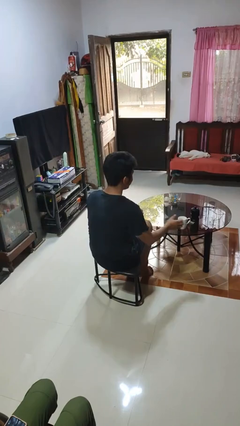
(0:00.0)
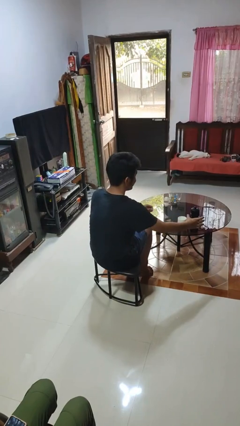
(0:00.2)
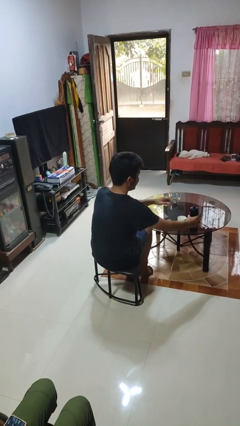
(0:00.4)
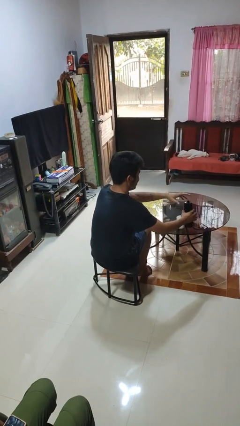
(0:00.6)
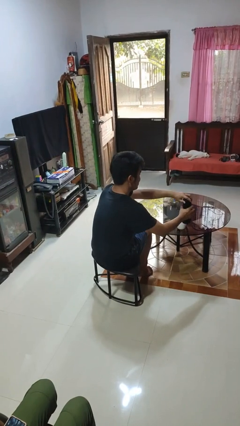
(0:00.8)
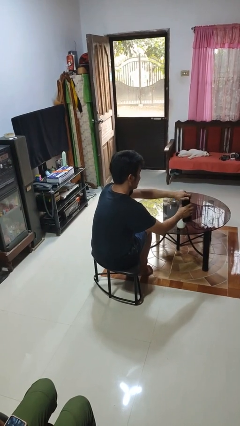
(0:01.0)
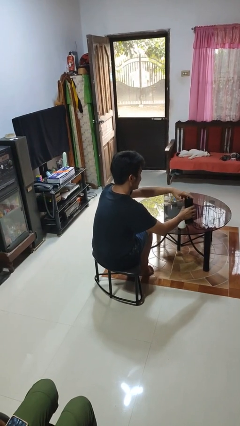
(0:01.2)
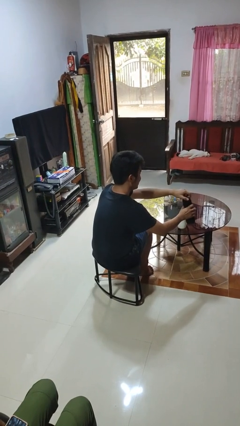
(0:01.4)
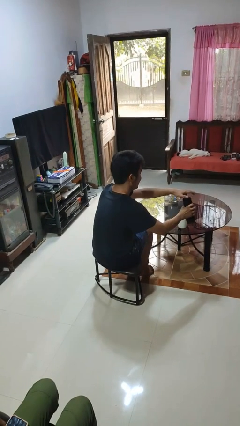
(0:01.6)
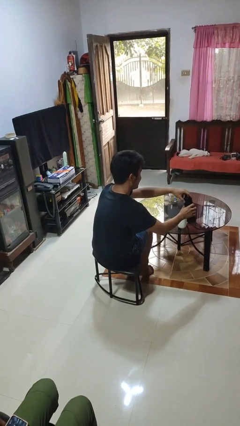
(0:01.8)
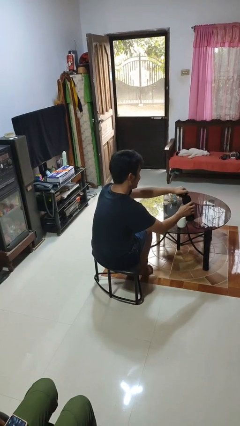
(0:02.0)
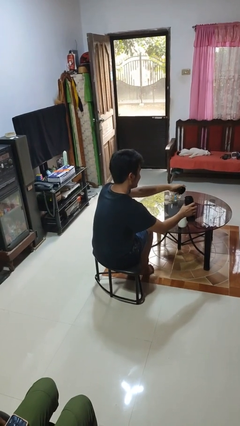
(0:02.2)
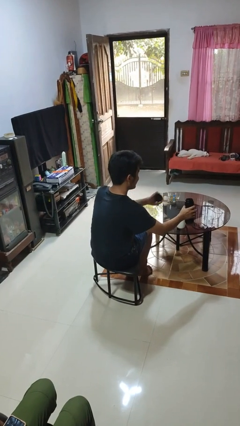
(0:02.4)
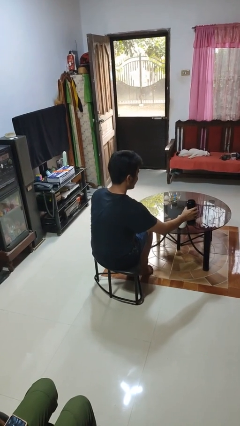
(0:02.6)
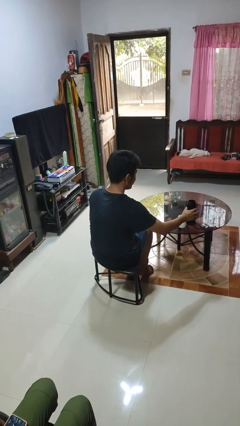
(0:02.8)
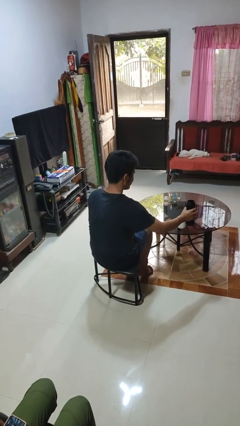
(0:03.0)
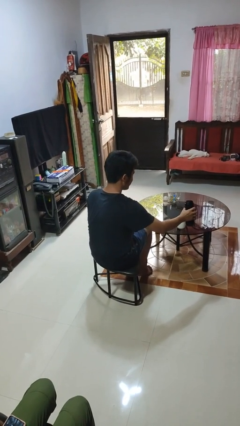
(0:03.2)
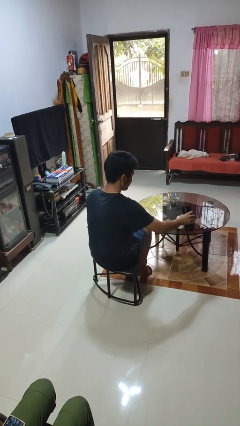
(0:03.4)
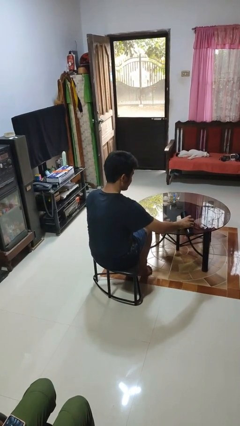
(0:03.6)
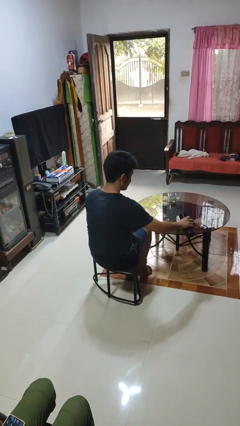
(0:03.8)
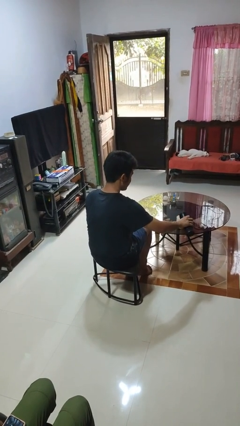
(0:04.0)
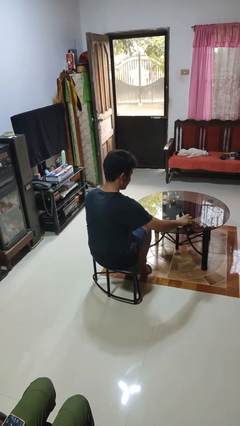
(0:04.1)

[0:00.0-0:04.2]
person unscrews lid from bottle

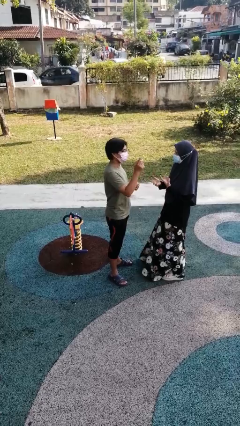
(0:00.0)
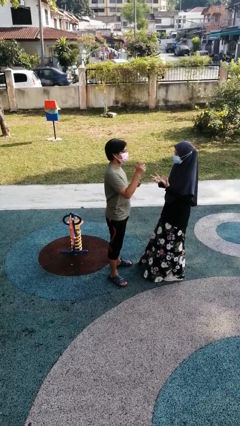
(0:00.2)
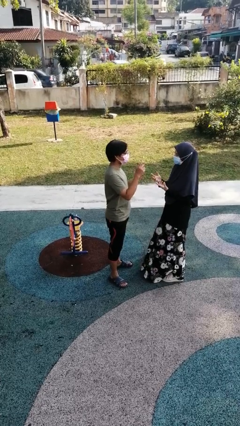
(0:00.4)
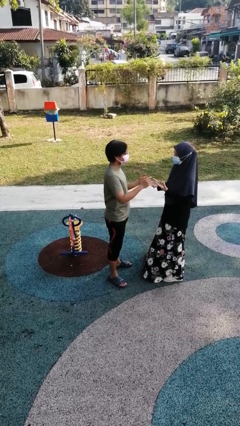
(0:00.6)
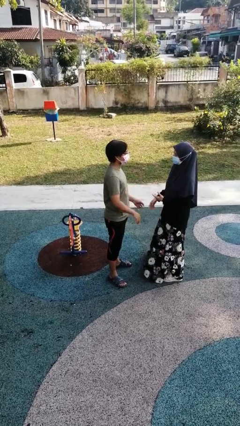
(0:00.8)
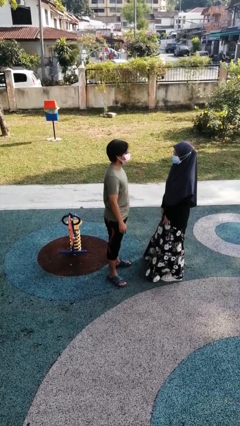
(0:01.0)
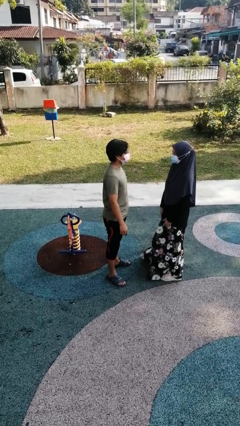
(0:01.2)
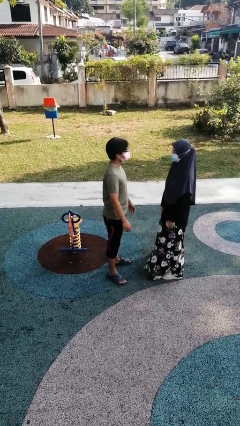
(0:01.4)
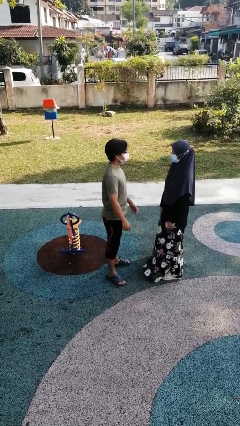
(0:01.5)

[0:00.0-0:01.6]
person talks to person

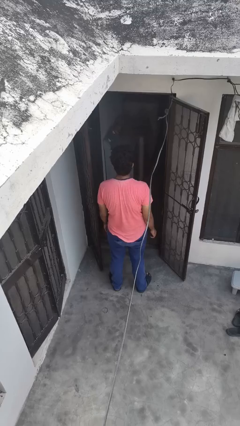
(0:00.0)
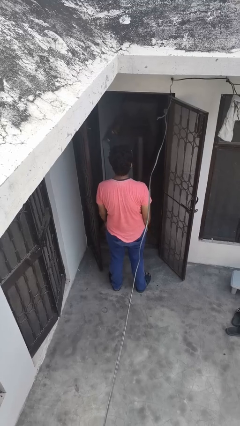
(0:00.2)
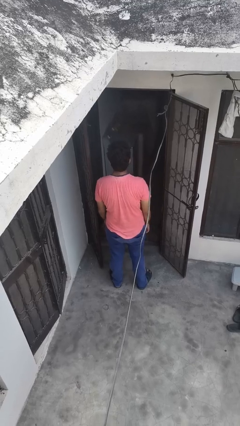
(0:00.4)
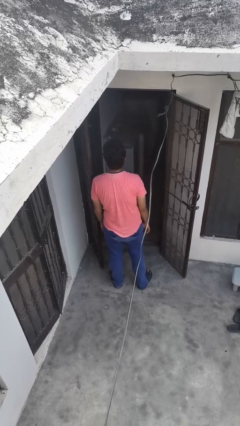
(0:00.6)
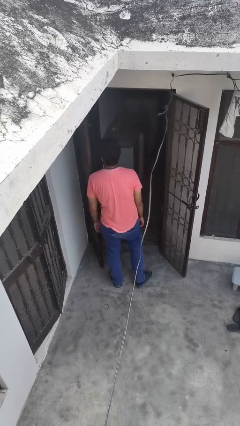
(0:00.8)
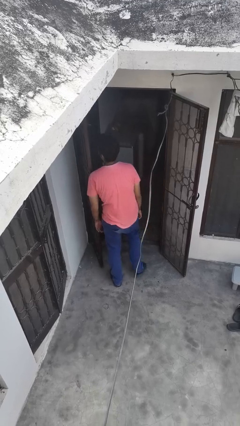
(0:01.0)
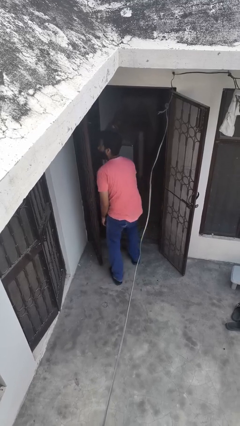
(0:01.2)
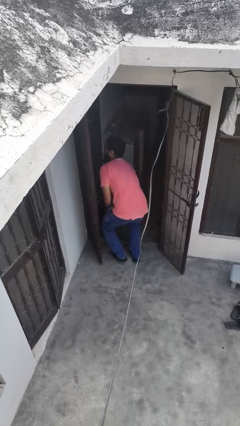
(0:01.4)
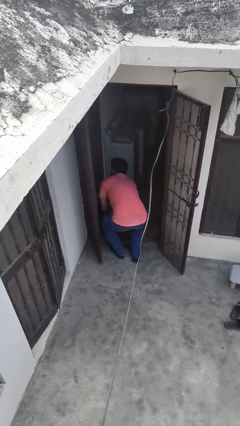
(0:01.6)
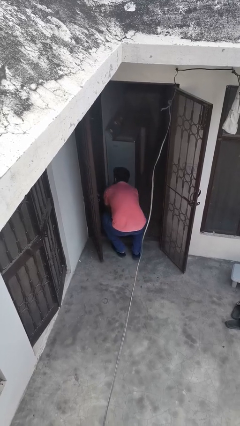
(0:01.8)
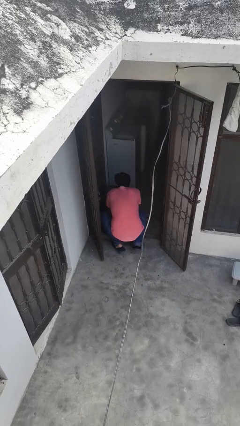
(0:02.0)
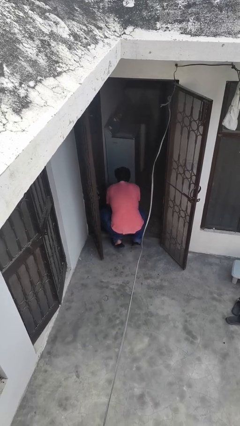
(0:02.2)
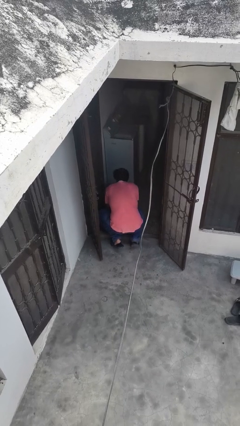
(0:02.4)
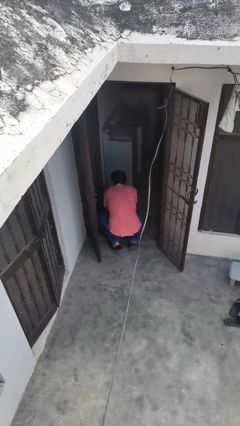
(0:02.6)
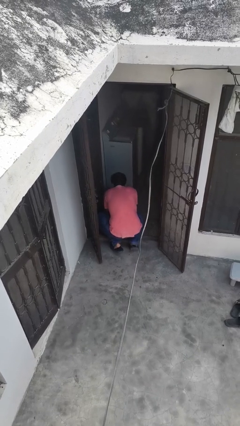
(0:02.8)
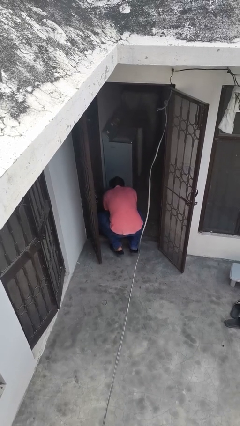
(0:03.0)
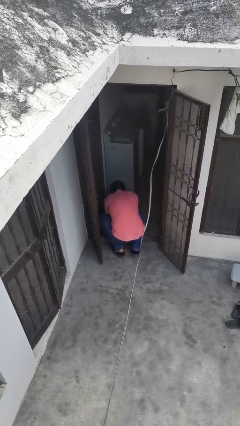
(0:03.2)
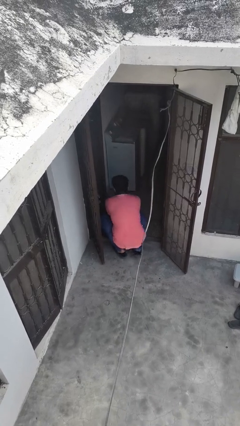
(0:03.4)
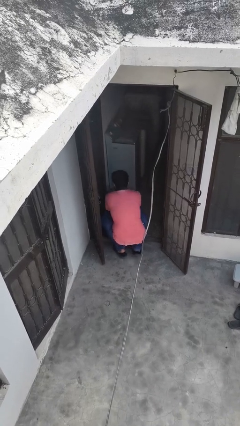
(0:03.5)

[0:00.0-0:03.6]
person bumps into wall

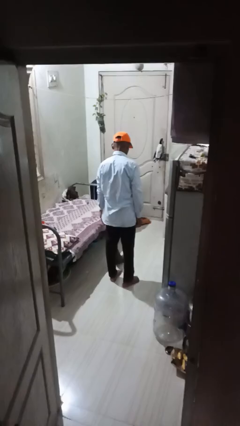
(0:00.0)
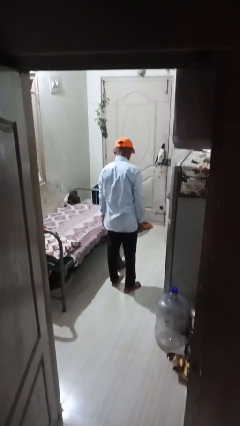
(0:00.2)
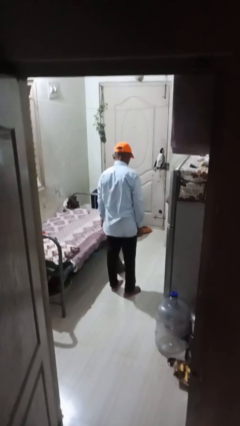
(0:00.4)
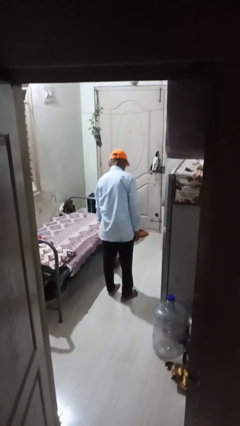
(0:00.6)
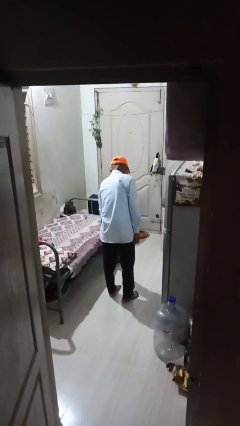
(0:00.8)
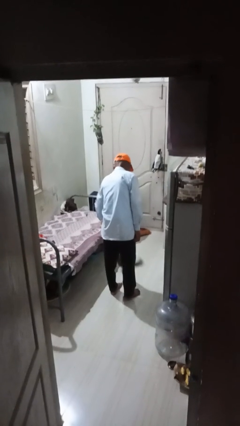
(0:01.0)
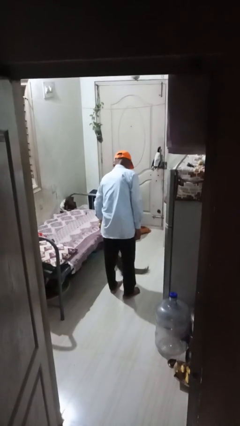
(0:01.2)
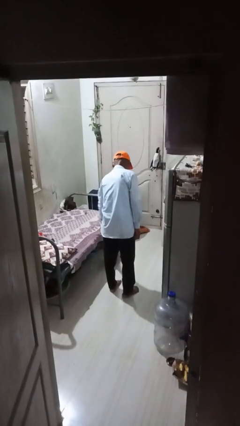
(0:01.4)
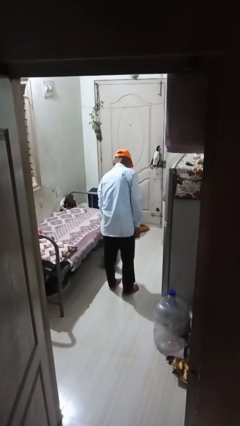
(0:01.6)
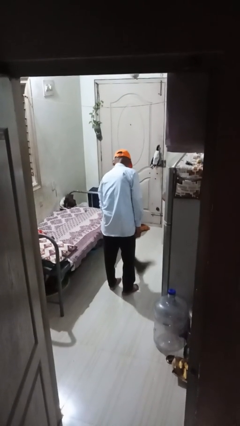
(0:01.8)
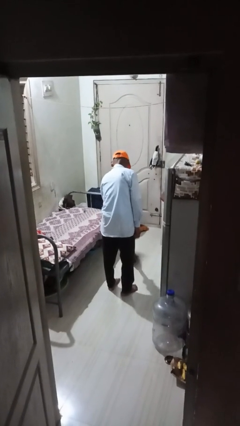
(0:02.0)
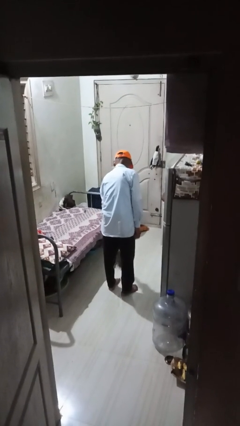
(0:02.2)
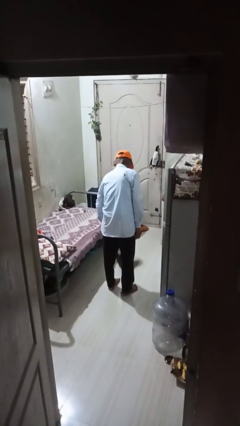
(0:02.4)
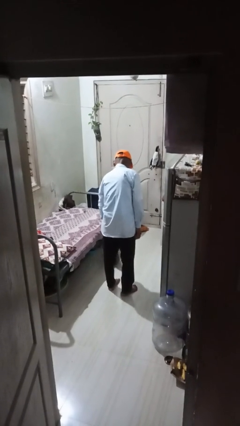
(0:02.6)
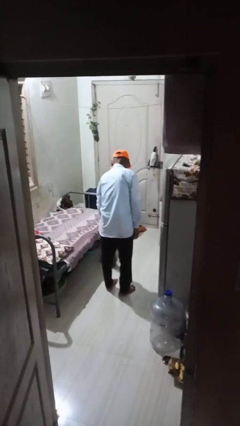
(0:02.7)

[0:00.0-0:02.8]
person mops

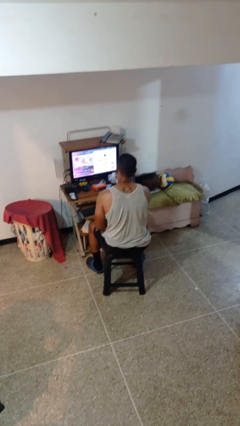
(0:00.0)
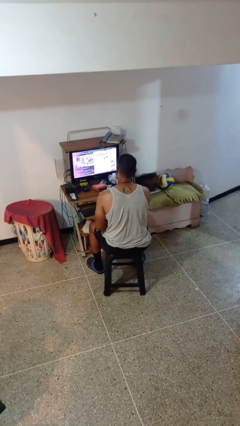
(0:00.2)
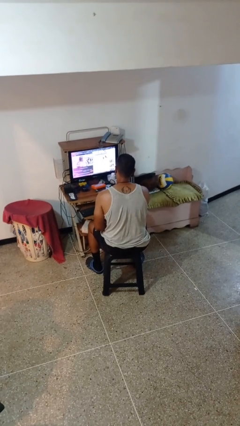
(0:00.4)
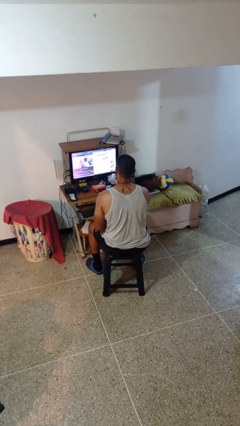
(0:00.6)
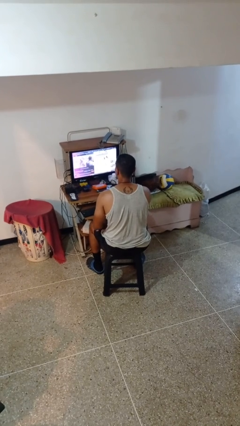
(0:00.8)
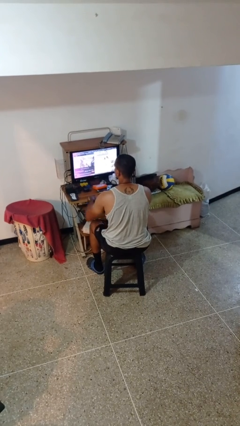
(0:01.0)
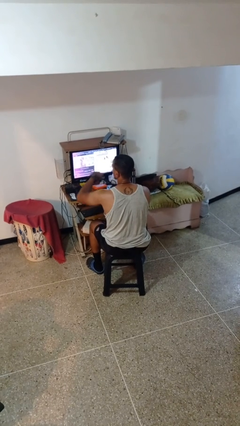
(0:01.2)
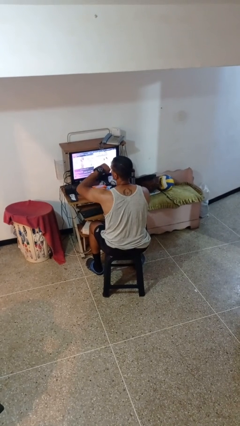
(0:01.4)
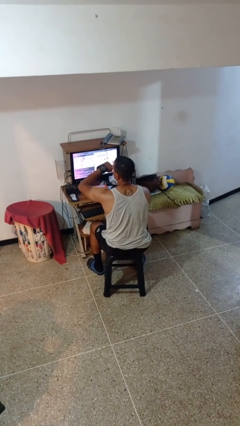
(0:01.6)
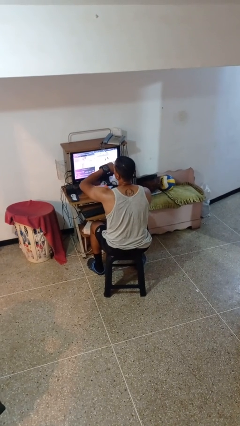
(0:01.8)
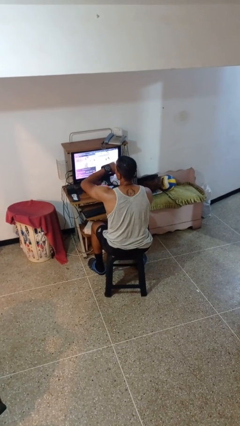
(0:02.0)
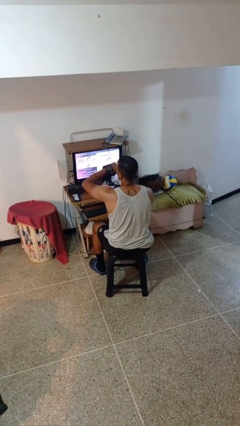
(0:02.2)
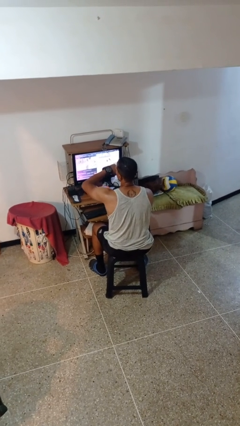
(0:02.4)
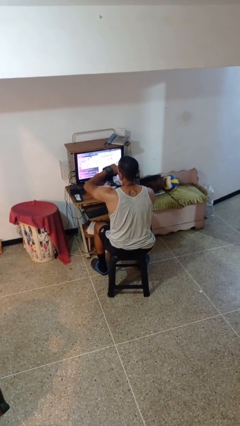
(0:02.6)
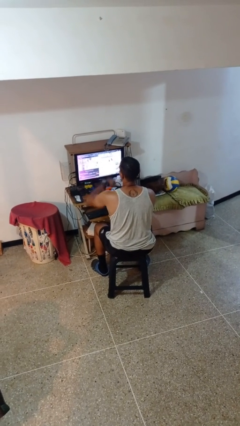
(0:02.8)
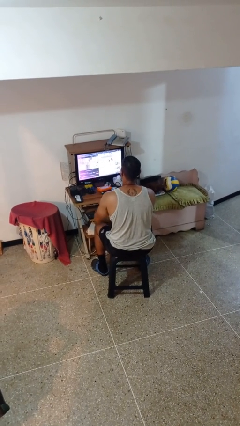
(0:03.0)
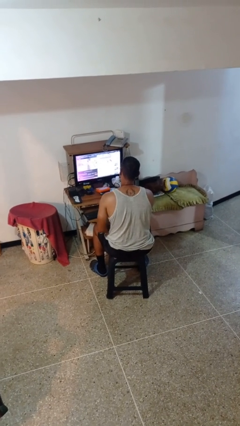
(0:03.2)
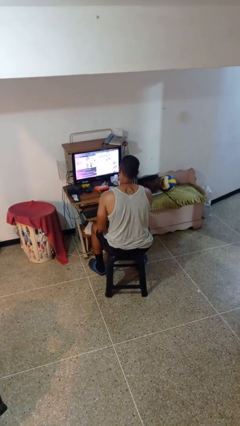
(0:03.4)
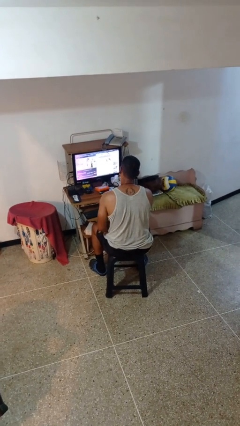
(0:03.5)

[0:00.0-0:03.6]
person looks at wristwatch

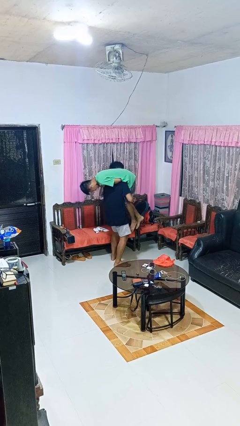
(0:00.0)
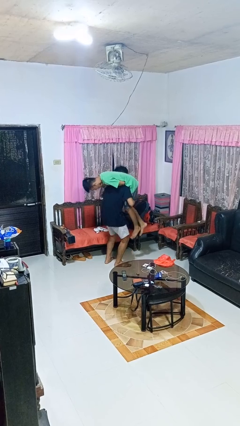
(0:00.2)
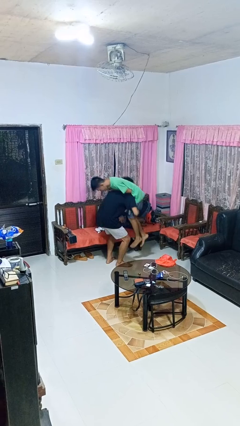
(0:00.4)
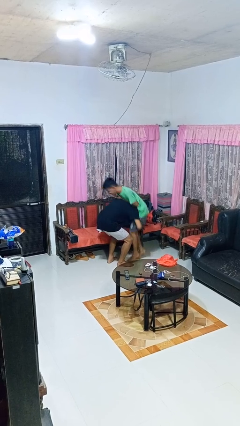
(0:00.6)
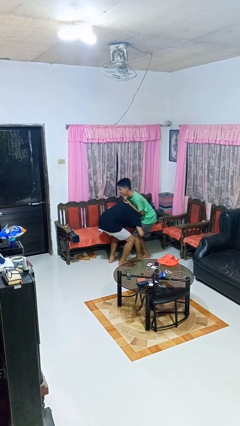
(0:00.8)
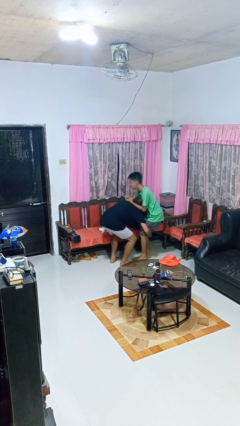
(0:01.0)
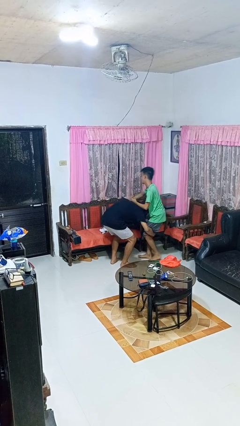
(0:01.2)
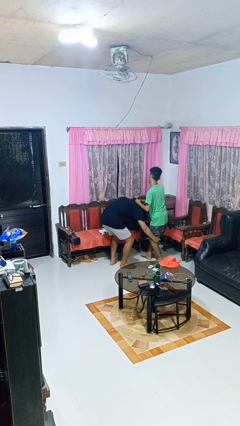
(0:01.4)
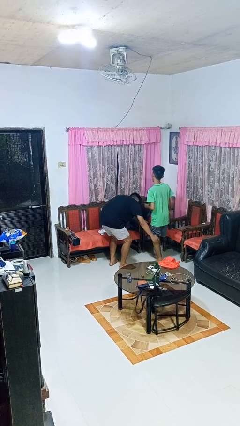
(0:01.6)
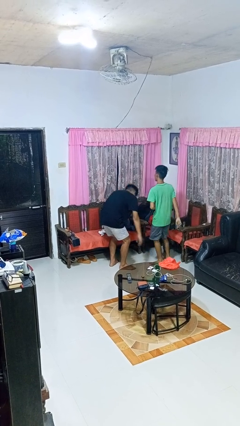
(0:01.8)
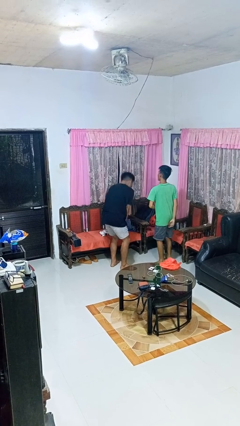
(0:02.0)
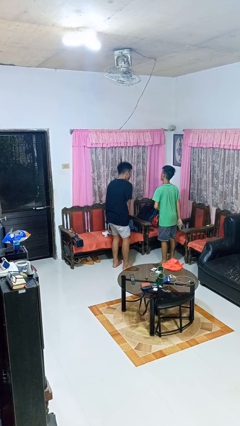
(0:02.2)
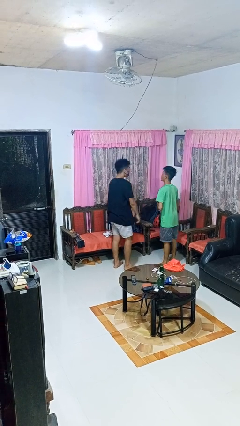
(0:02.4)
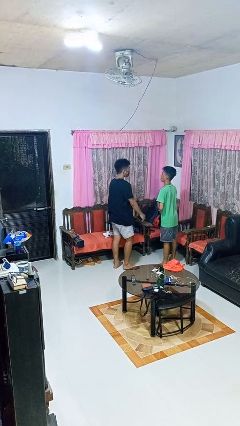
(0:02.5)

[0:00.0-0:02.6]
person puts down person
